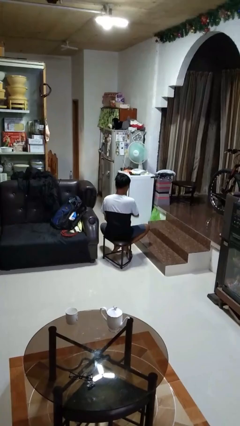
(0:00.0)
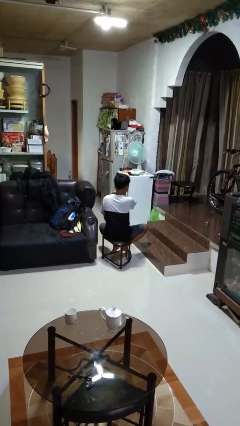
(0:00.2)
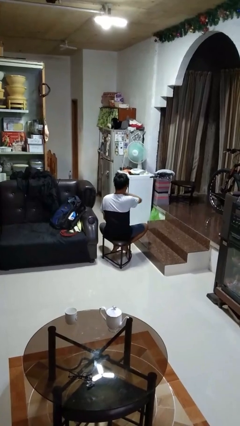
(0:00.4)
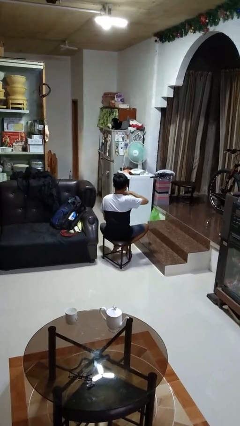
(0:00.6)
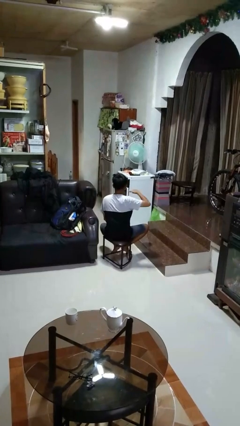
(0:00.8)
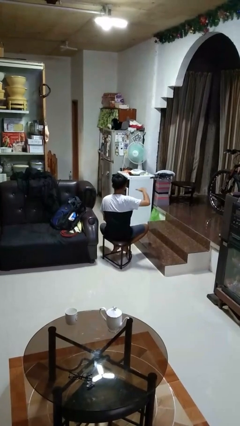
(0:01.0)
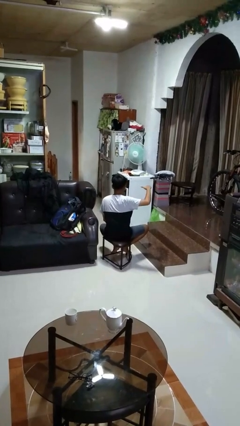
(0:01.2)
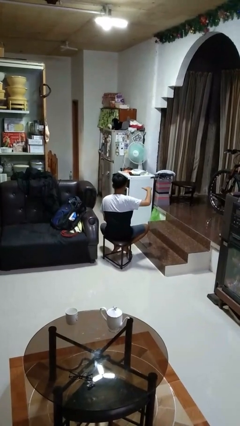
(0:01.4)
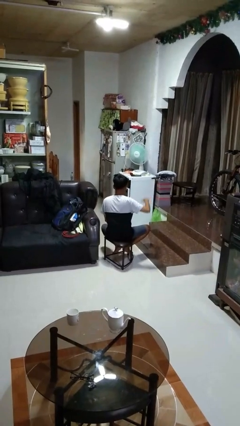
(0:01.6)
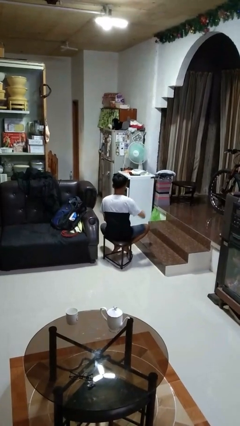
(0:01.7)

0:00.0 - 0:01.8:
person gestures cut

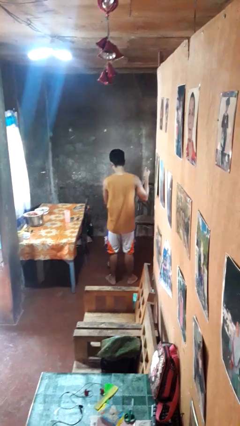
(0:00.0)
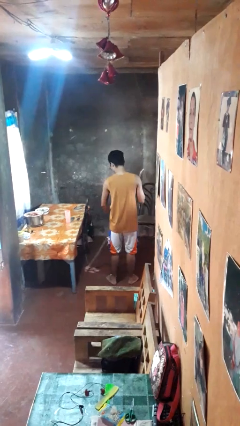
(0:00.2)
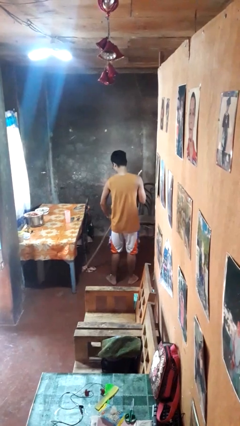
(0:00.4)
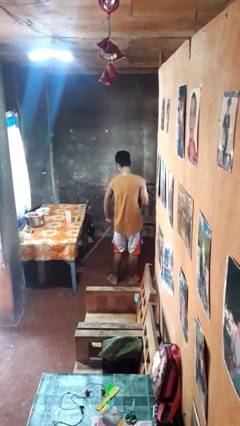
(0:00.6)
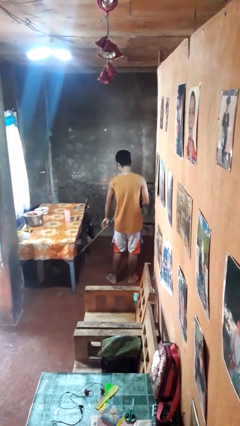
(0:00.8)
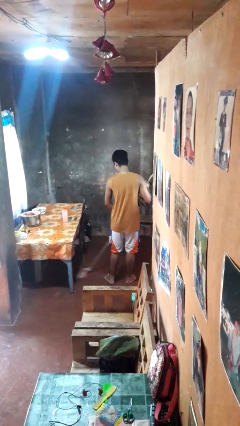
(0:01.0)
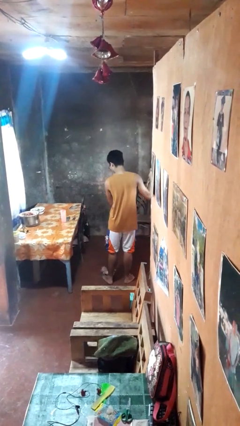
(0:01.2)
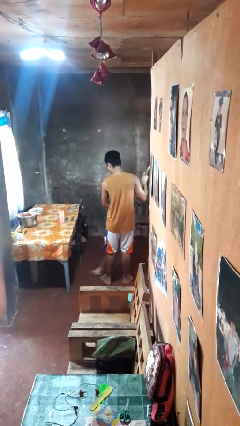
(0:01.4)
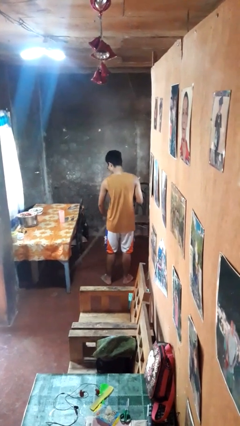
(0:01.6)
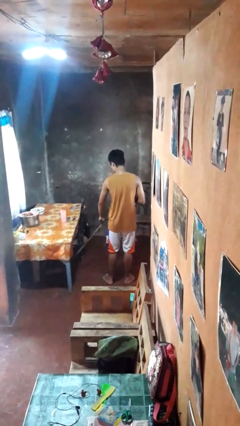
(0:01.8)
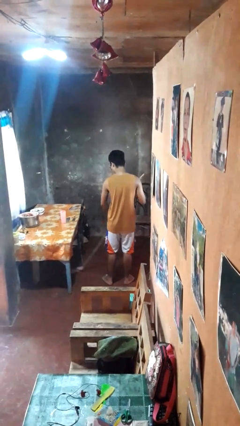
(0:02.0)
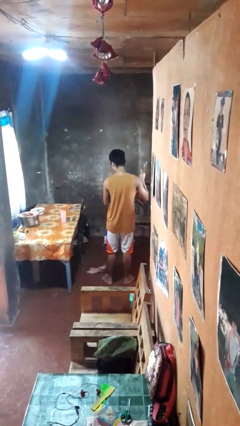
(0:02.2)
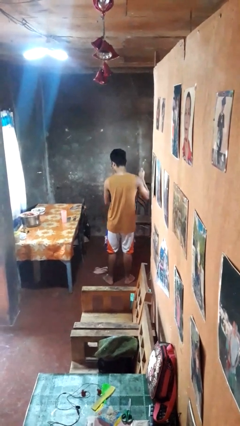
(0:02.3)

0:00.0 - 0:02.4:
person mops

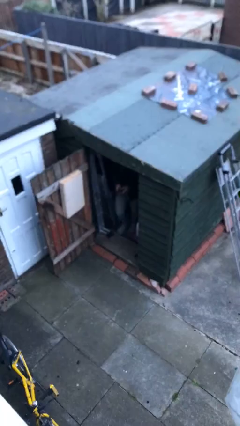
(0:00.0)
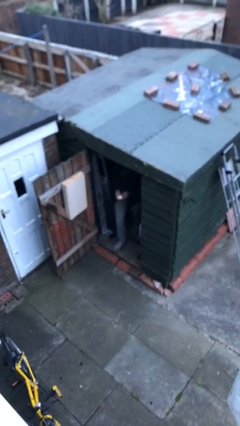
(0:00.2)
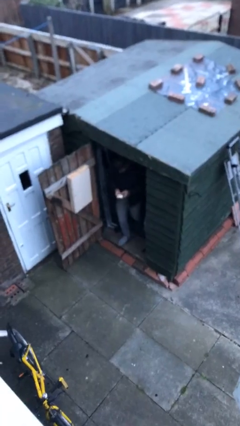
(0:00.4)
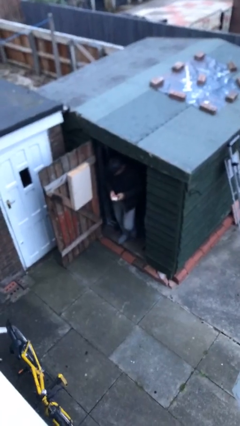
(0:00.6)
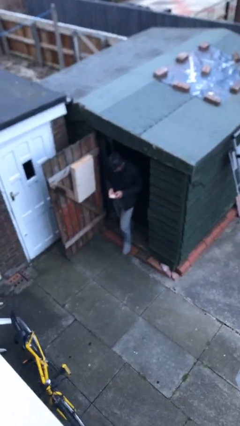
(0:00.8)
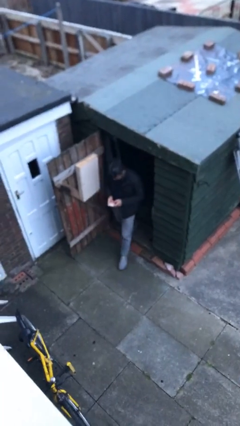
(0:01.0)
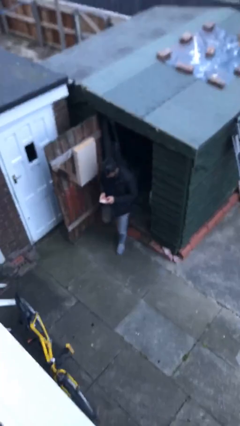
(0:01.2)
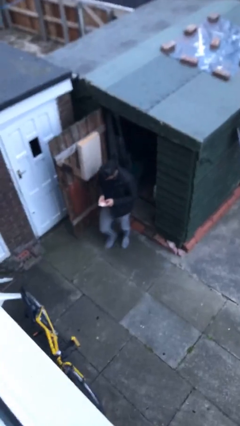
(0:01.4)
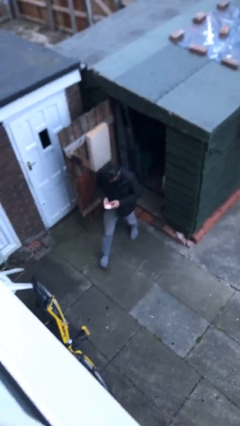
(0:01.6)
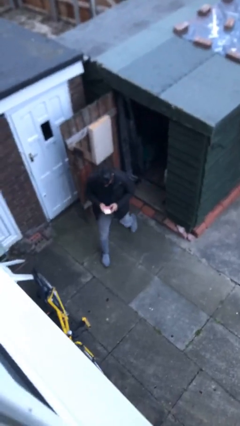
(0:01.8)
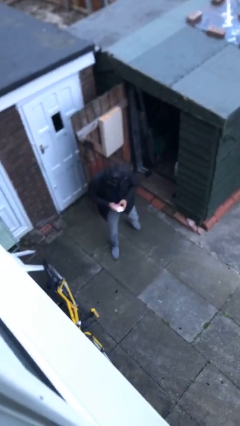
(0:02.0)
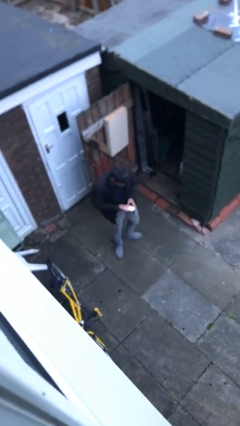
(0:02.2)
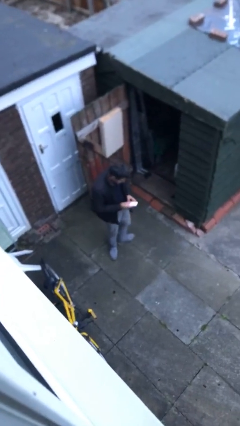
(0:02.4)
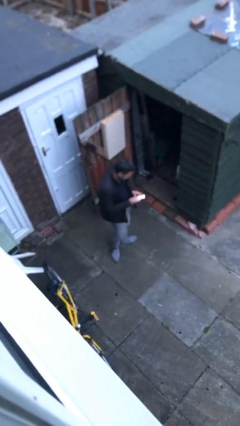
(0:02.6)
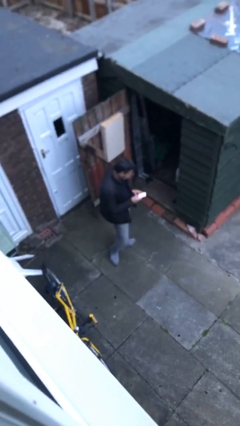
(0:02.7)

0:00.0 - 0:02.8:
person enters scene through structure

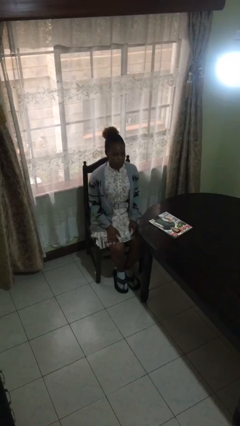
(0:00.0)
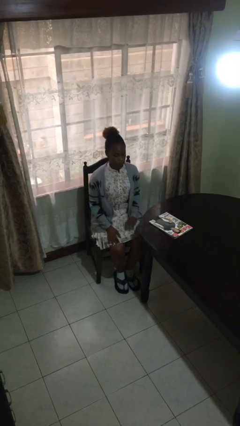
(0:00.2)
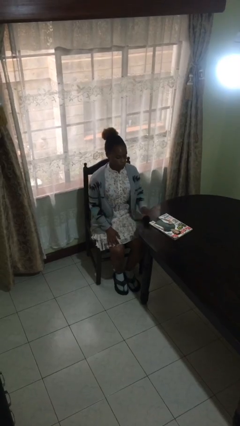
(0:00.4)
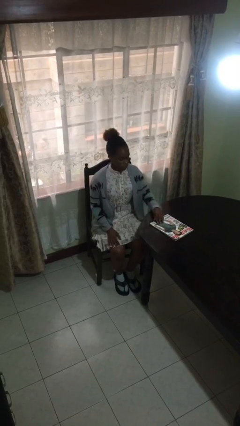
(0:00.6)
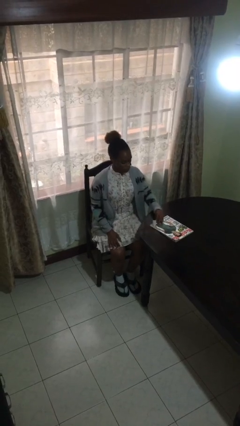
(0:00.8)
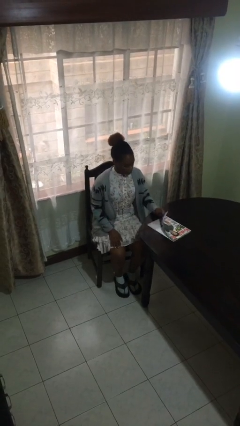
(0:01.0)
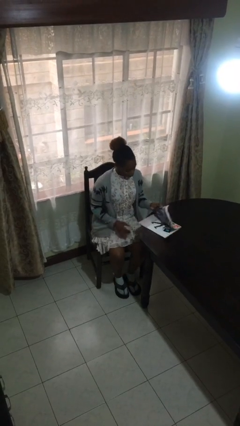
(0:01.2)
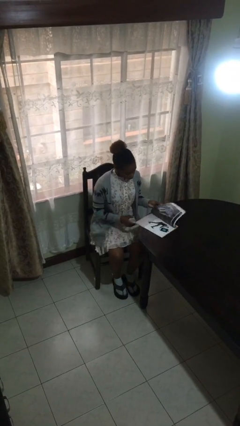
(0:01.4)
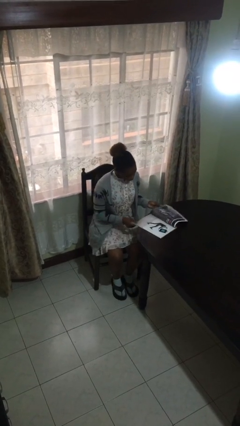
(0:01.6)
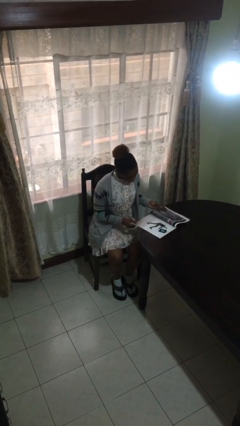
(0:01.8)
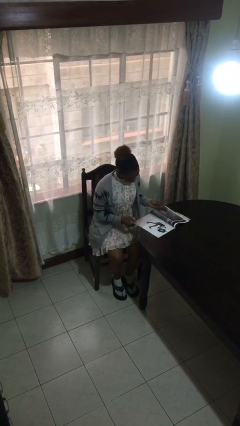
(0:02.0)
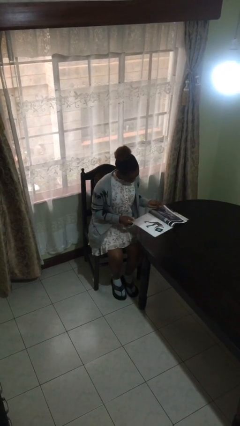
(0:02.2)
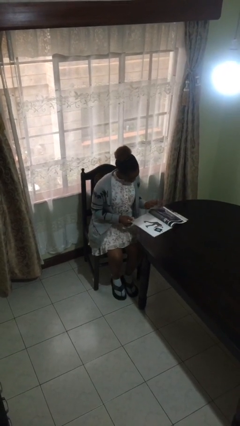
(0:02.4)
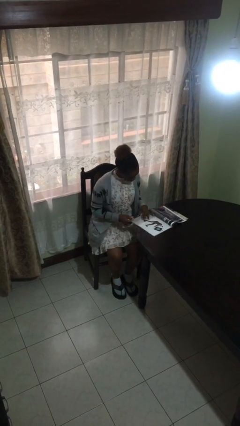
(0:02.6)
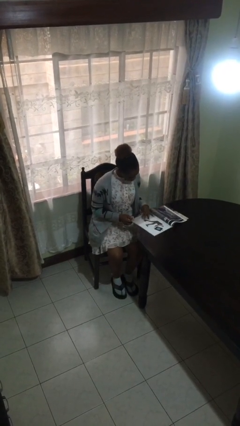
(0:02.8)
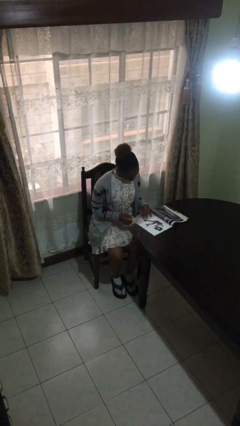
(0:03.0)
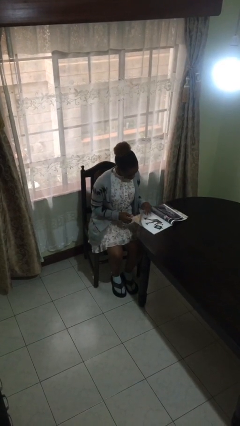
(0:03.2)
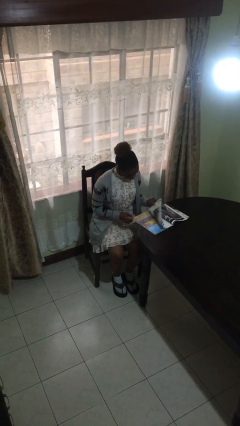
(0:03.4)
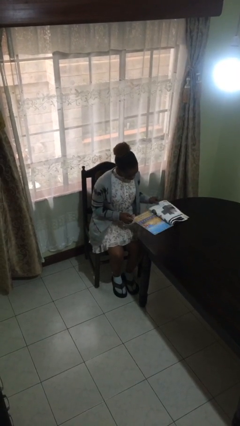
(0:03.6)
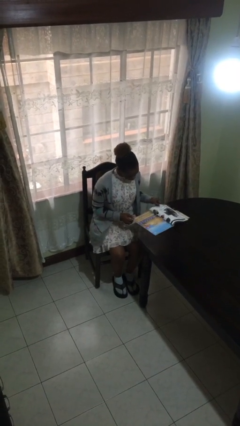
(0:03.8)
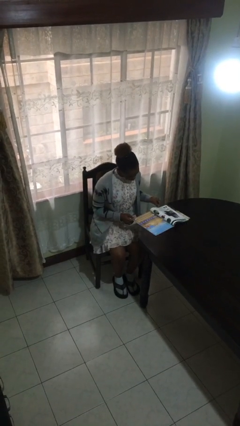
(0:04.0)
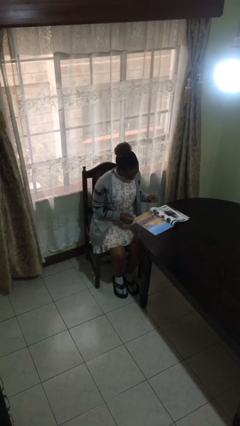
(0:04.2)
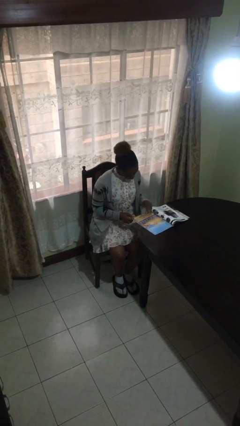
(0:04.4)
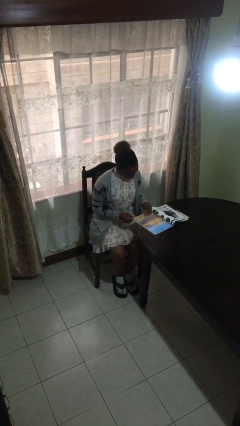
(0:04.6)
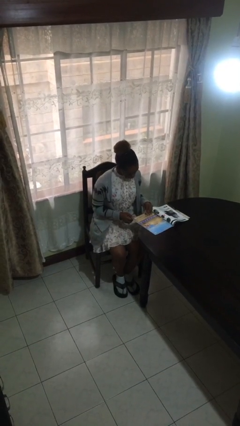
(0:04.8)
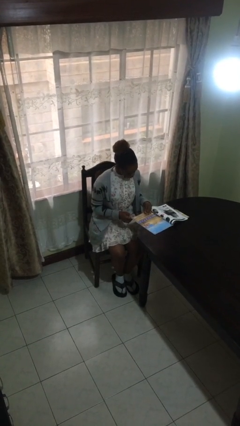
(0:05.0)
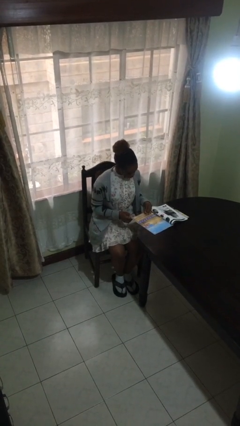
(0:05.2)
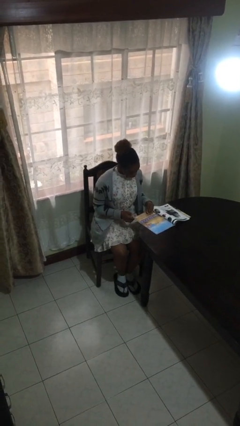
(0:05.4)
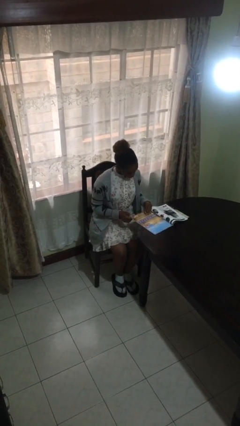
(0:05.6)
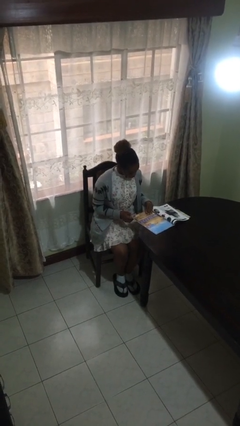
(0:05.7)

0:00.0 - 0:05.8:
person reads document

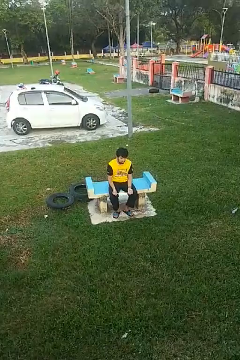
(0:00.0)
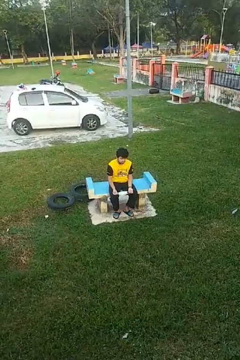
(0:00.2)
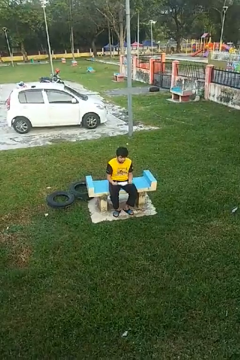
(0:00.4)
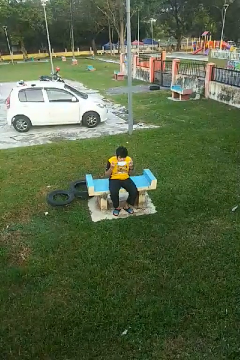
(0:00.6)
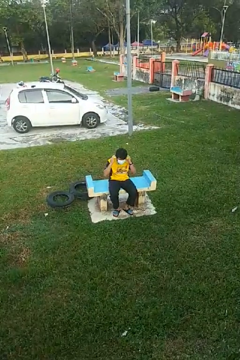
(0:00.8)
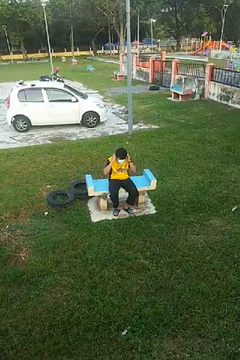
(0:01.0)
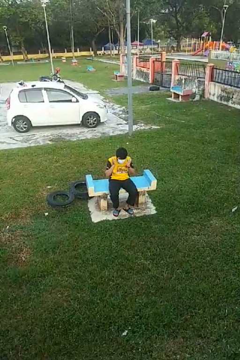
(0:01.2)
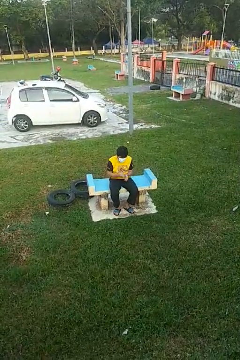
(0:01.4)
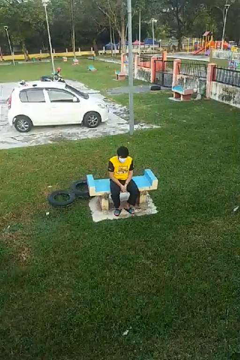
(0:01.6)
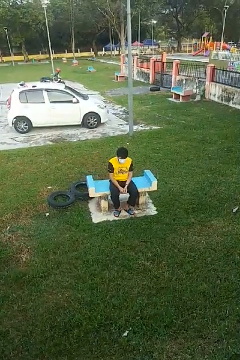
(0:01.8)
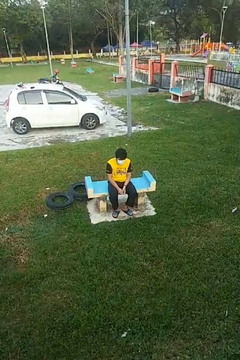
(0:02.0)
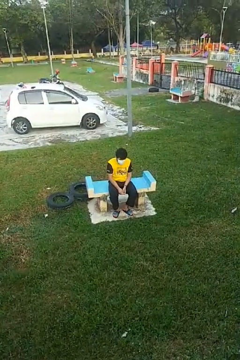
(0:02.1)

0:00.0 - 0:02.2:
person puts on facemask

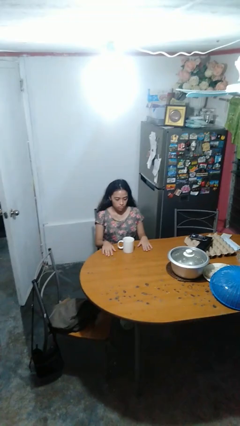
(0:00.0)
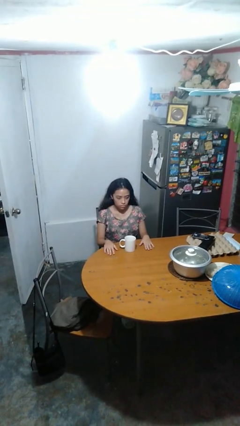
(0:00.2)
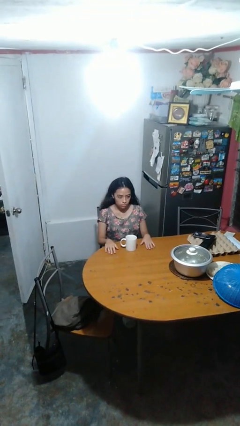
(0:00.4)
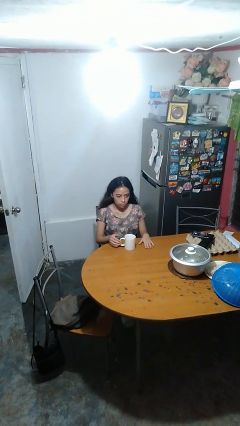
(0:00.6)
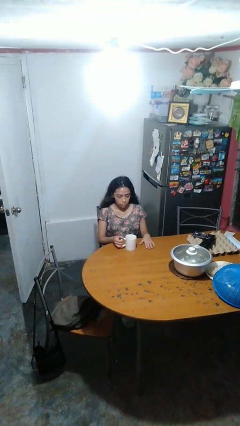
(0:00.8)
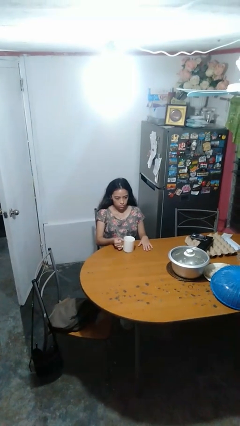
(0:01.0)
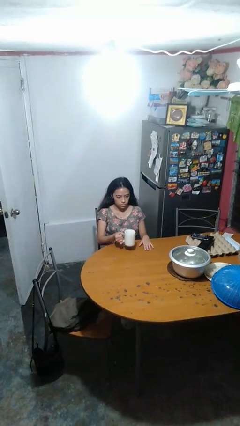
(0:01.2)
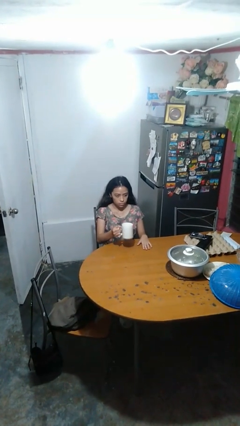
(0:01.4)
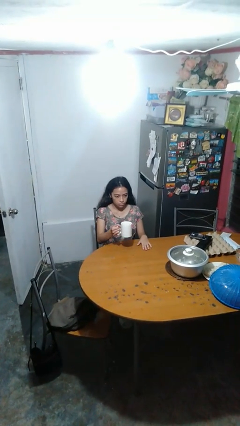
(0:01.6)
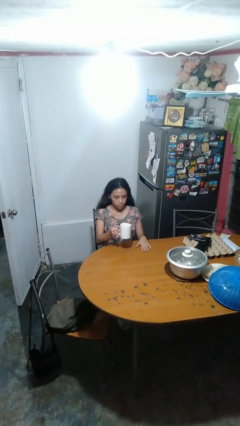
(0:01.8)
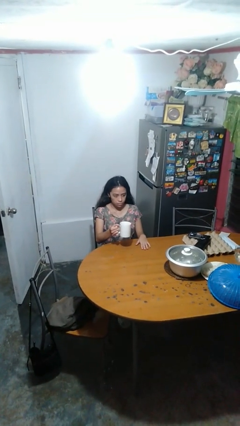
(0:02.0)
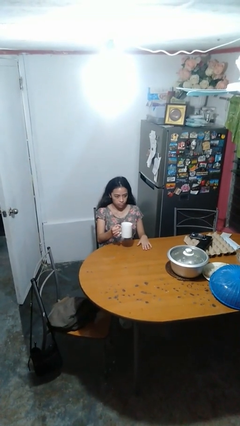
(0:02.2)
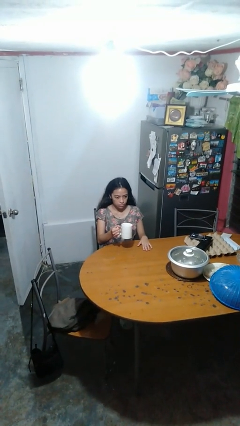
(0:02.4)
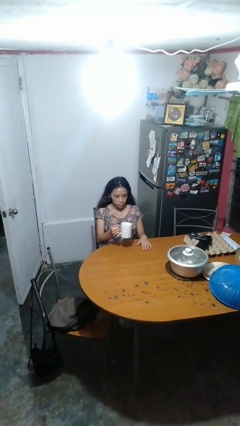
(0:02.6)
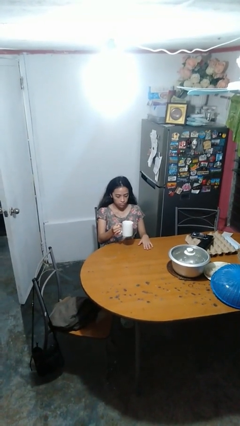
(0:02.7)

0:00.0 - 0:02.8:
person picks up object from table
